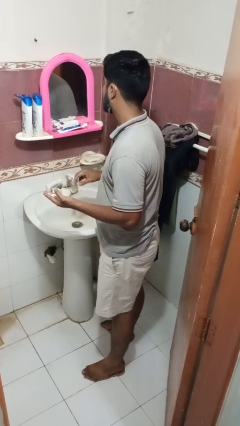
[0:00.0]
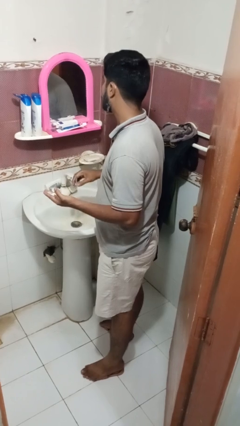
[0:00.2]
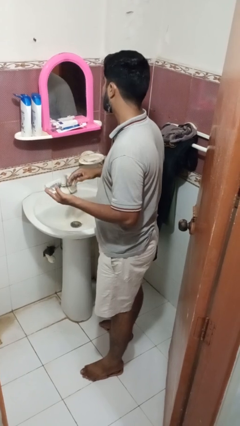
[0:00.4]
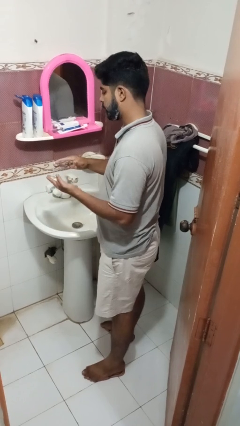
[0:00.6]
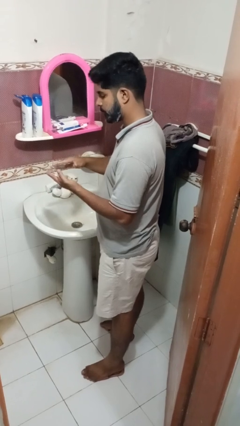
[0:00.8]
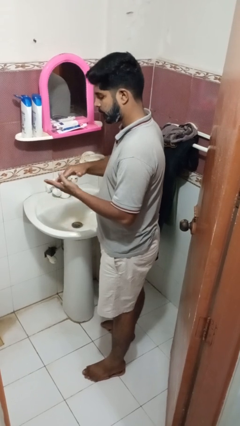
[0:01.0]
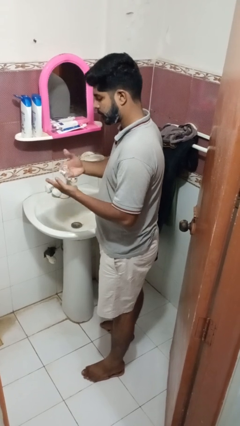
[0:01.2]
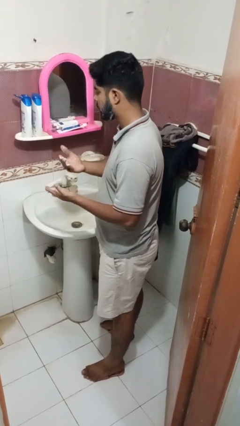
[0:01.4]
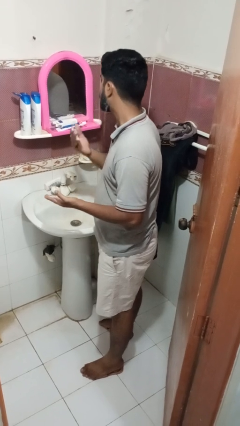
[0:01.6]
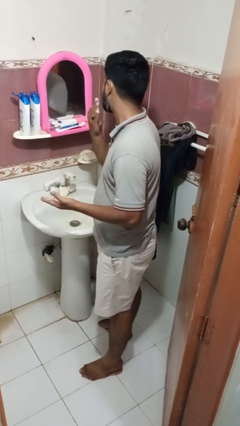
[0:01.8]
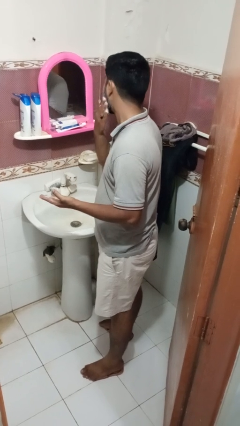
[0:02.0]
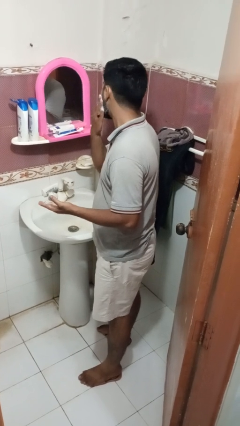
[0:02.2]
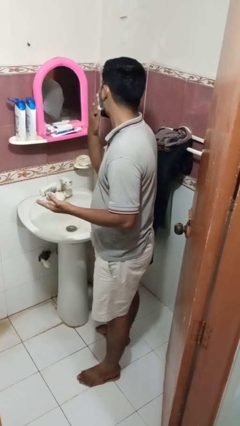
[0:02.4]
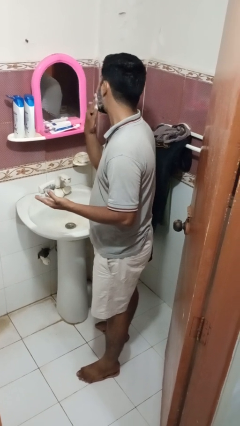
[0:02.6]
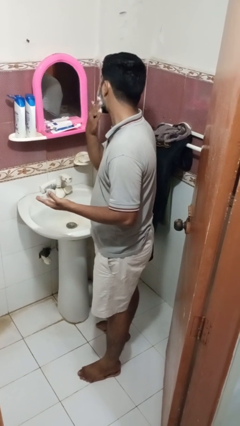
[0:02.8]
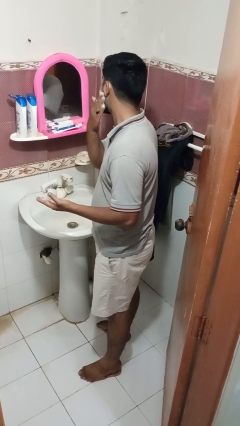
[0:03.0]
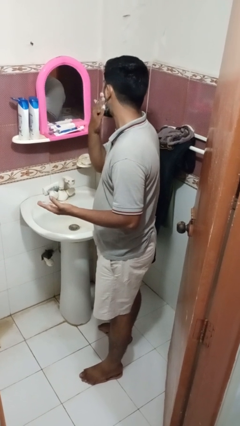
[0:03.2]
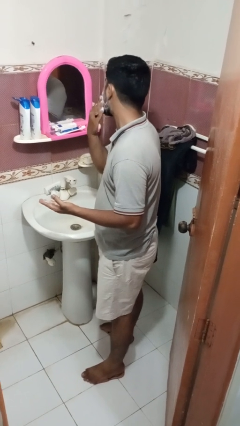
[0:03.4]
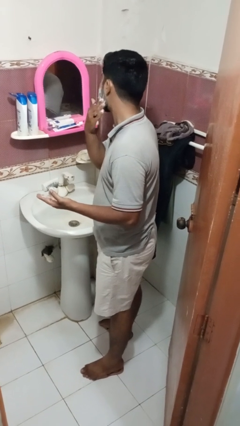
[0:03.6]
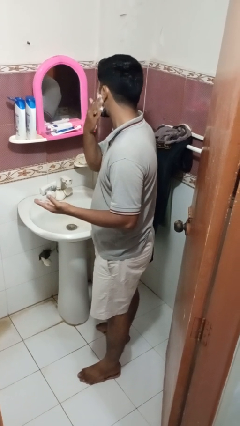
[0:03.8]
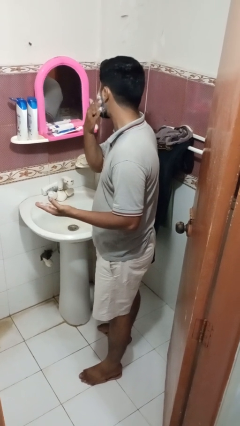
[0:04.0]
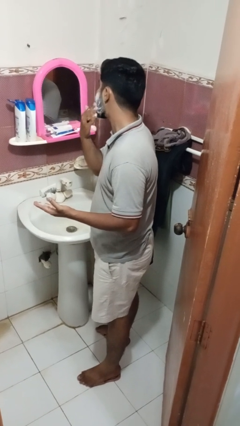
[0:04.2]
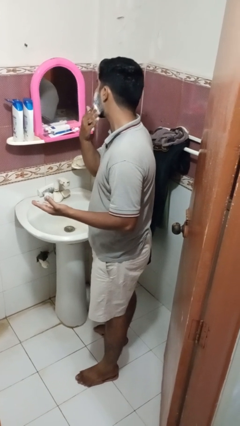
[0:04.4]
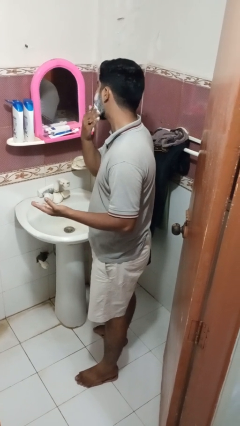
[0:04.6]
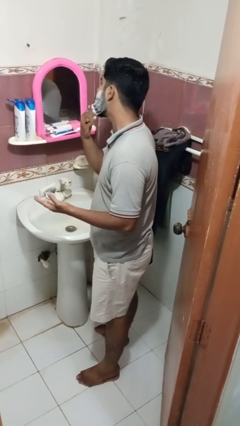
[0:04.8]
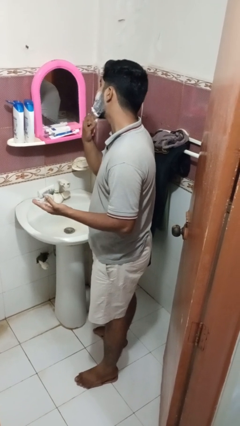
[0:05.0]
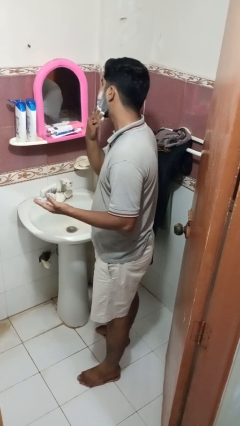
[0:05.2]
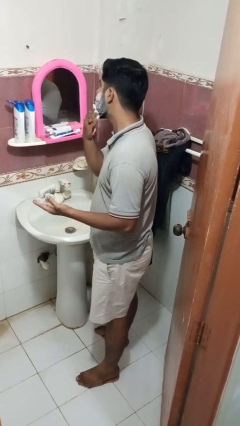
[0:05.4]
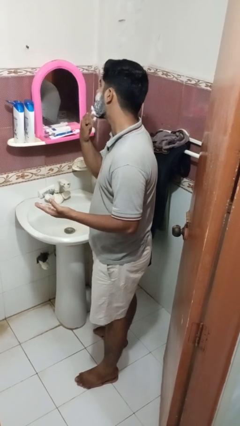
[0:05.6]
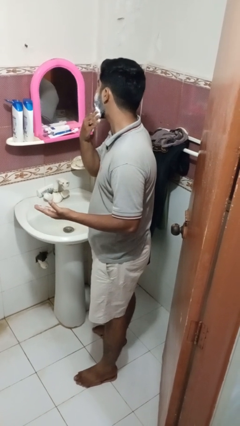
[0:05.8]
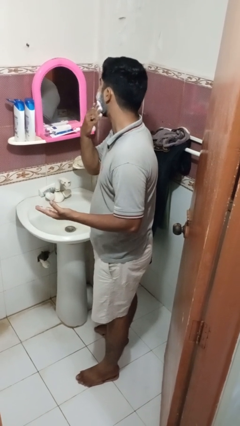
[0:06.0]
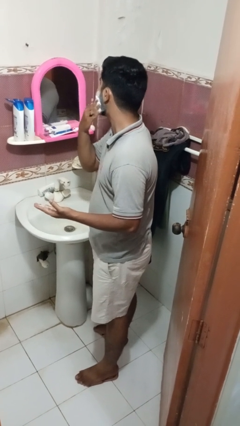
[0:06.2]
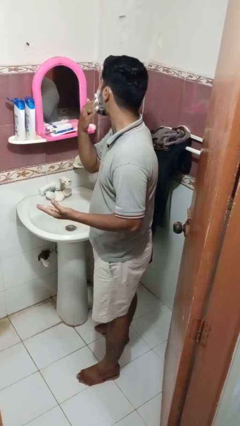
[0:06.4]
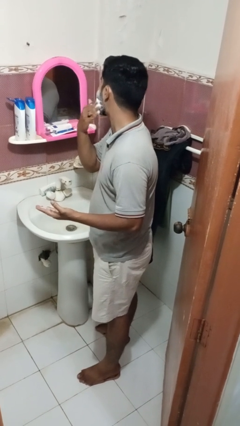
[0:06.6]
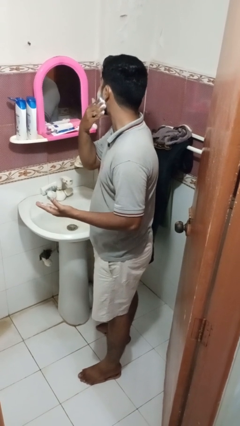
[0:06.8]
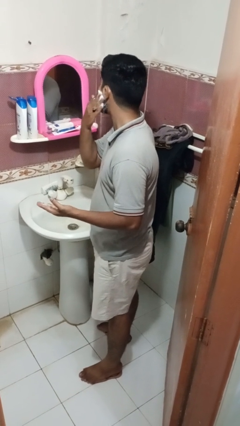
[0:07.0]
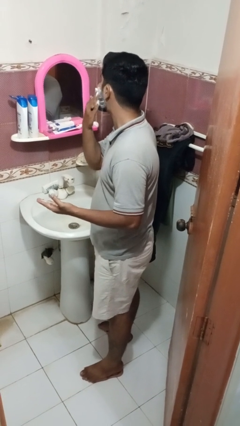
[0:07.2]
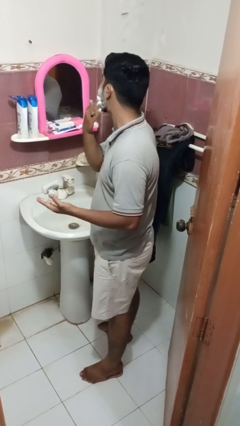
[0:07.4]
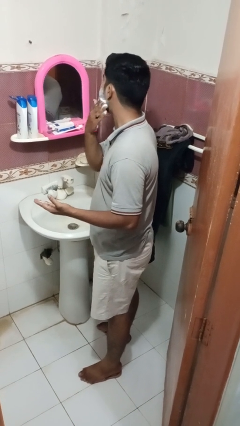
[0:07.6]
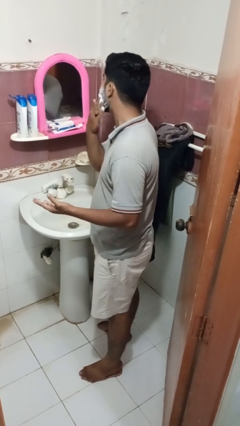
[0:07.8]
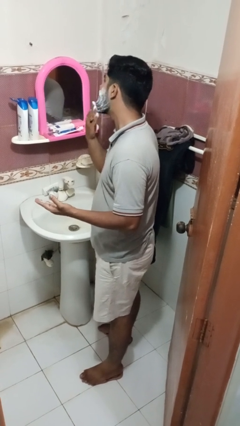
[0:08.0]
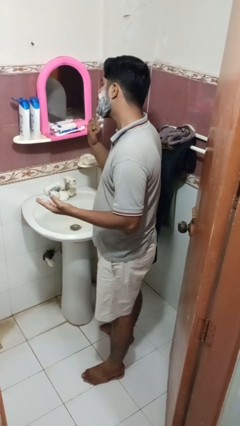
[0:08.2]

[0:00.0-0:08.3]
person applies shaving cream

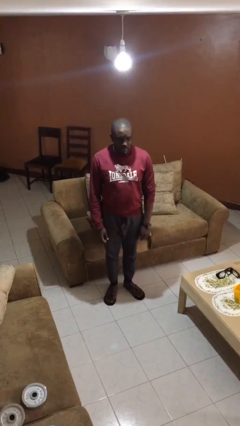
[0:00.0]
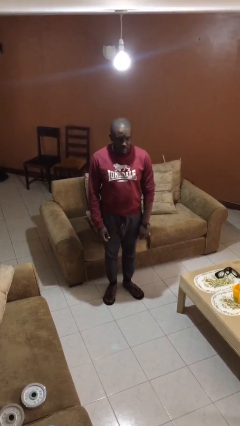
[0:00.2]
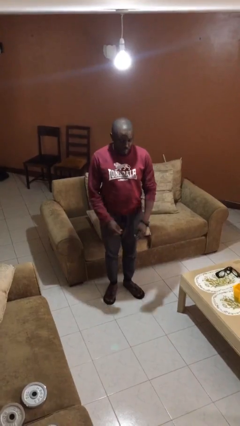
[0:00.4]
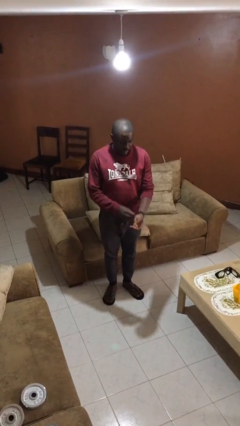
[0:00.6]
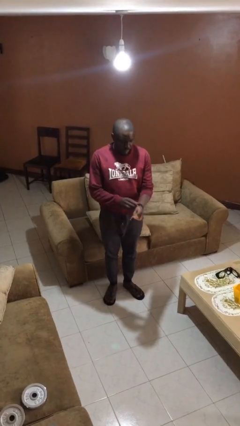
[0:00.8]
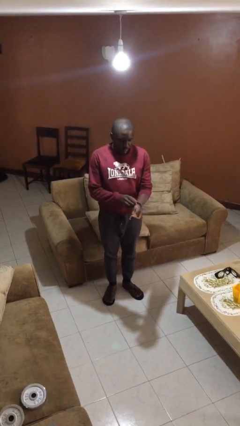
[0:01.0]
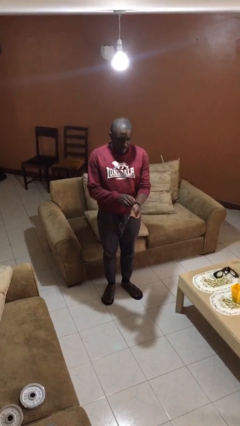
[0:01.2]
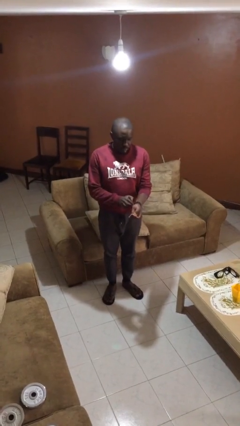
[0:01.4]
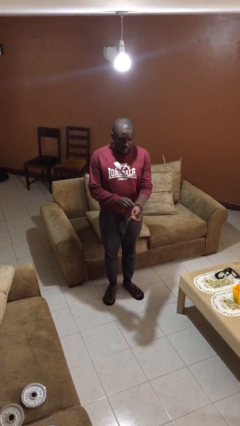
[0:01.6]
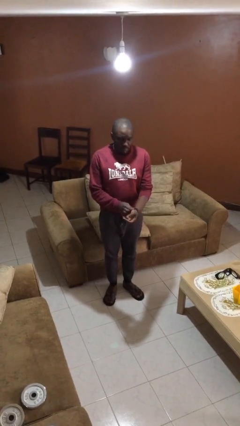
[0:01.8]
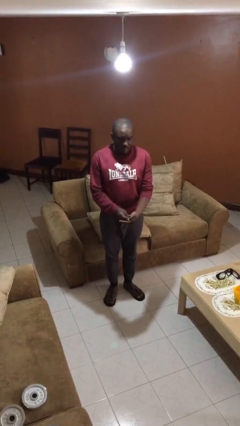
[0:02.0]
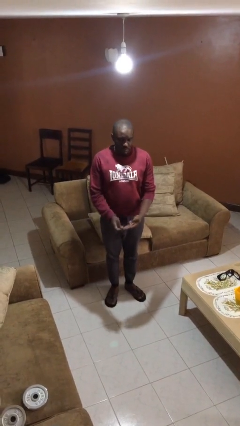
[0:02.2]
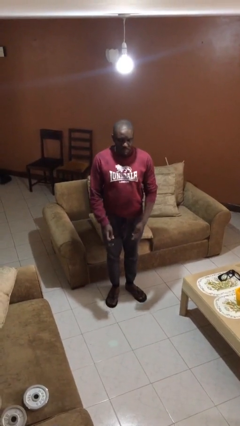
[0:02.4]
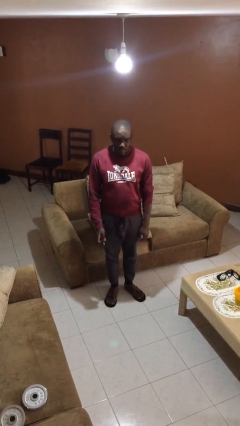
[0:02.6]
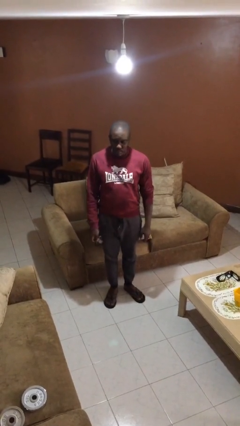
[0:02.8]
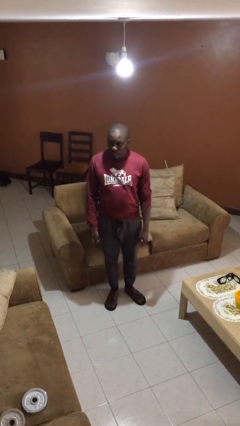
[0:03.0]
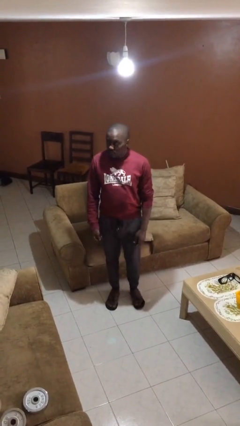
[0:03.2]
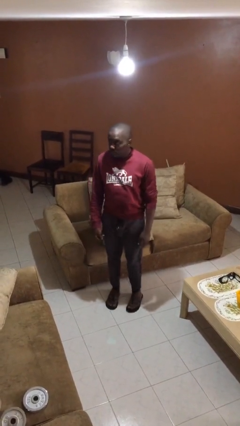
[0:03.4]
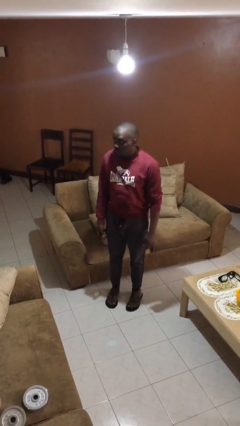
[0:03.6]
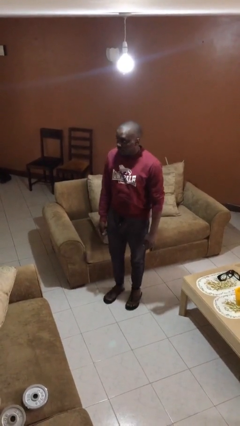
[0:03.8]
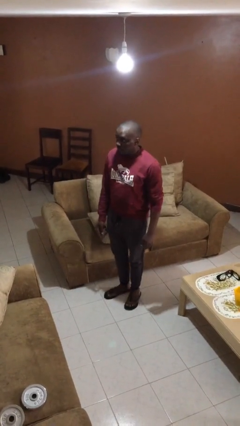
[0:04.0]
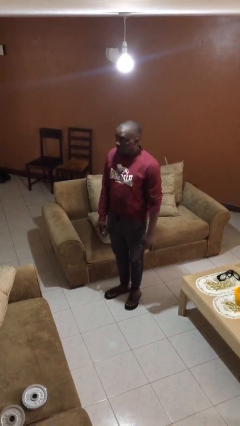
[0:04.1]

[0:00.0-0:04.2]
person takes off wristwatch

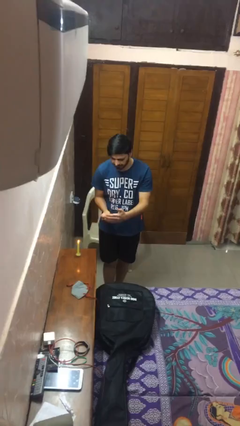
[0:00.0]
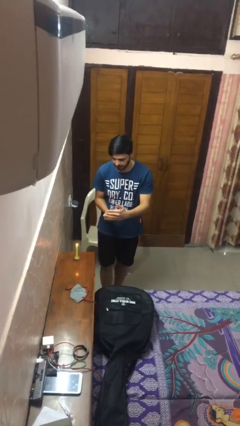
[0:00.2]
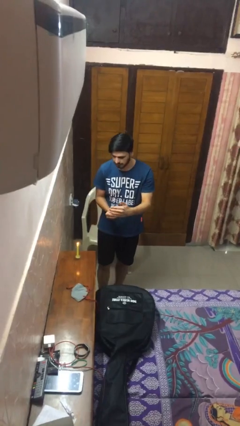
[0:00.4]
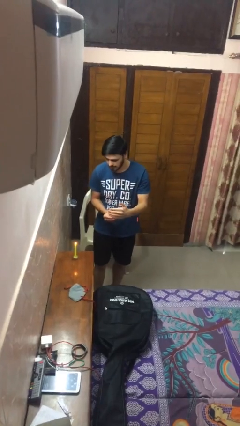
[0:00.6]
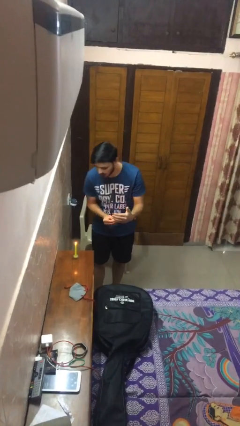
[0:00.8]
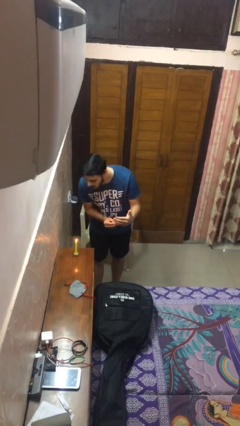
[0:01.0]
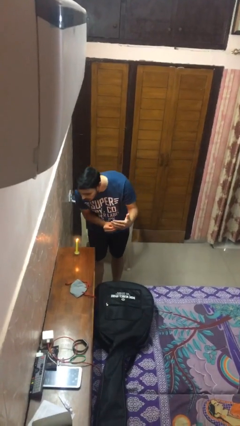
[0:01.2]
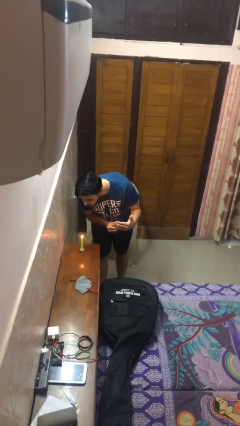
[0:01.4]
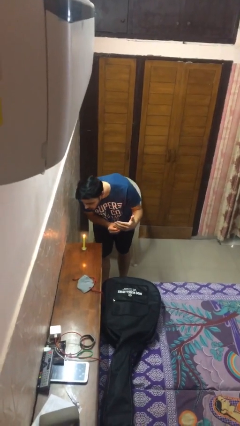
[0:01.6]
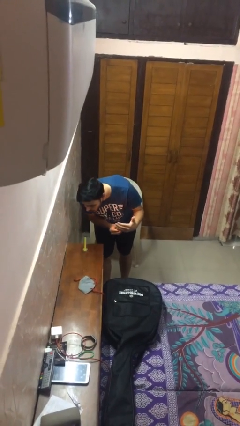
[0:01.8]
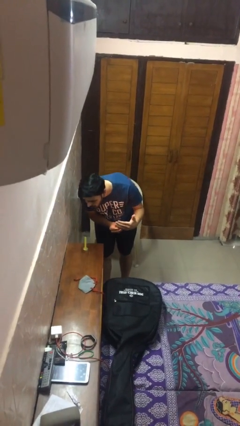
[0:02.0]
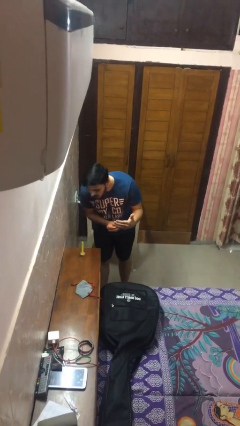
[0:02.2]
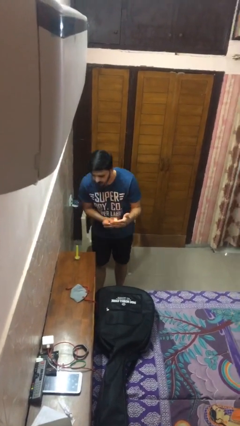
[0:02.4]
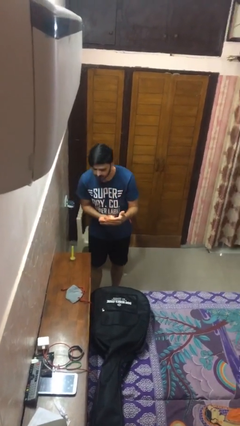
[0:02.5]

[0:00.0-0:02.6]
person extinguishes candle

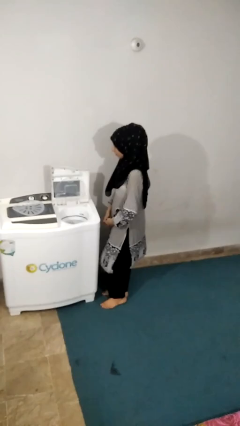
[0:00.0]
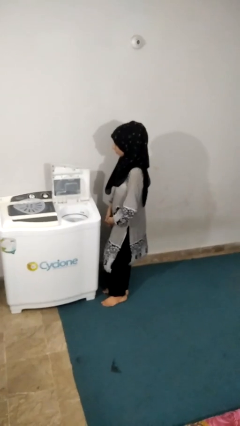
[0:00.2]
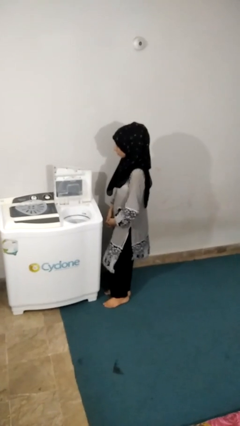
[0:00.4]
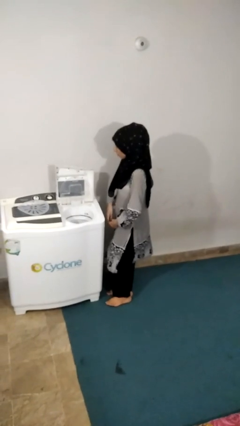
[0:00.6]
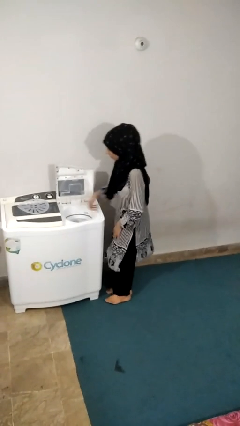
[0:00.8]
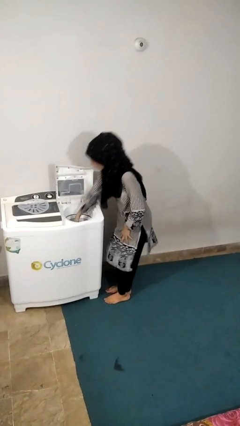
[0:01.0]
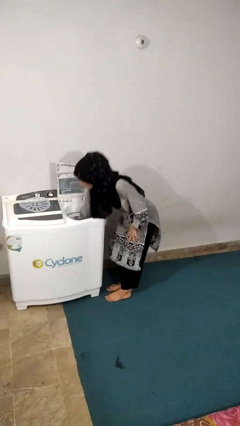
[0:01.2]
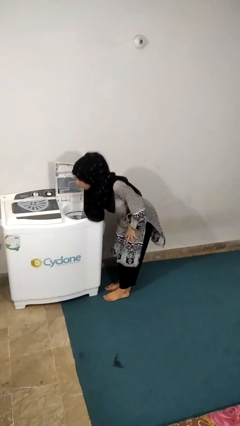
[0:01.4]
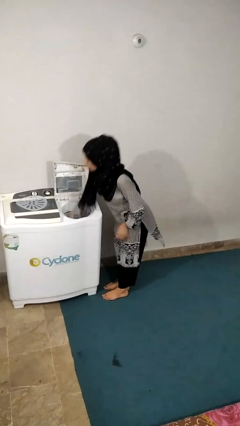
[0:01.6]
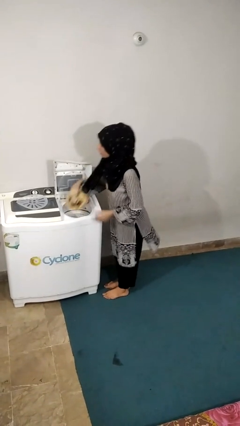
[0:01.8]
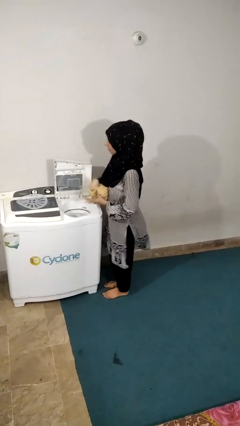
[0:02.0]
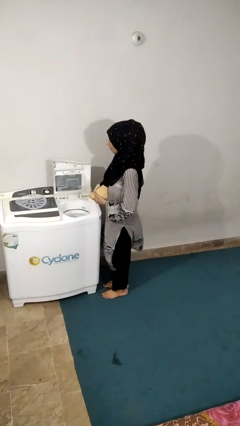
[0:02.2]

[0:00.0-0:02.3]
person unloads dryer

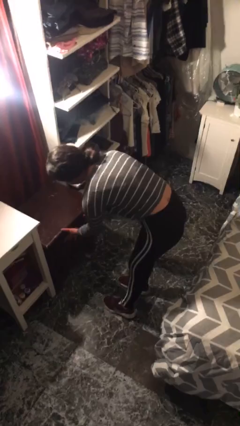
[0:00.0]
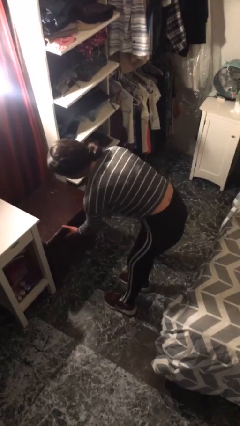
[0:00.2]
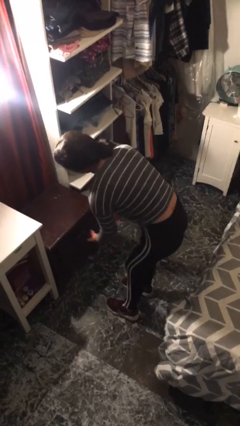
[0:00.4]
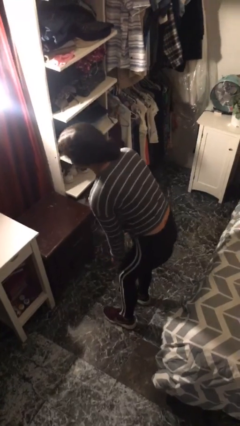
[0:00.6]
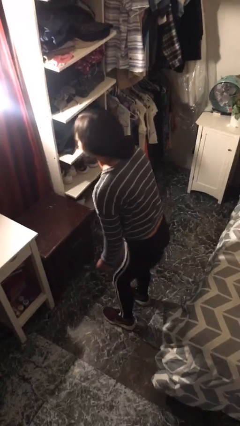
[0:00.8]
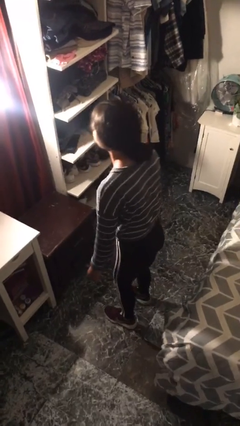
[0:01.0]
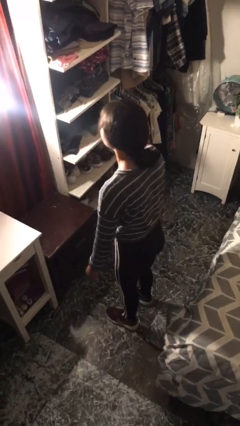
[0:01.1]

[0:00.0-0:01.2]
person closes dresser drawer
